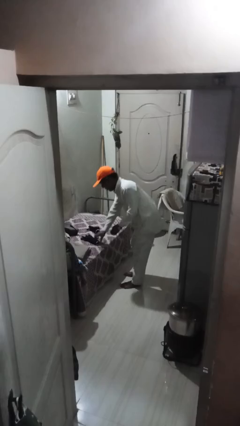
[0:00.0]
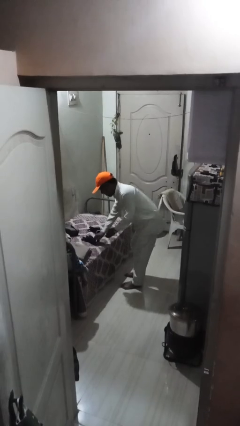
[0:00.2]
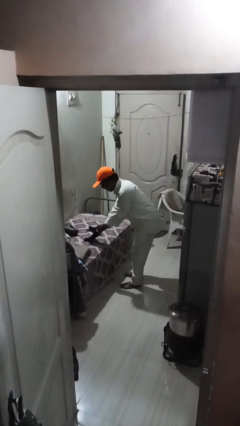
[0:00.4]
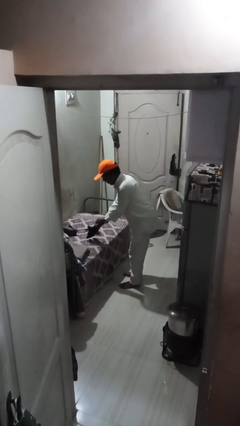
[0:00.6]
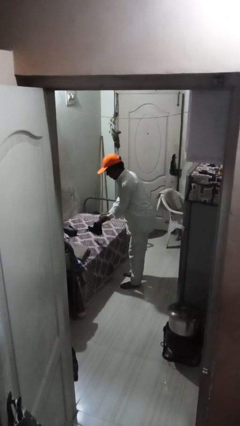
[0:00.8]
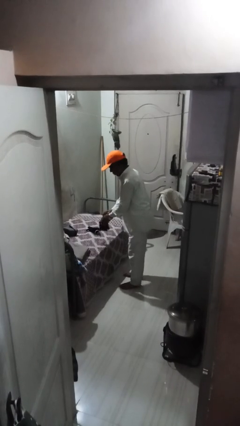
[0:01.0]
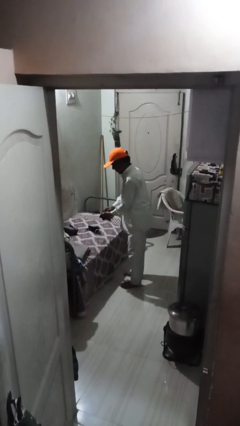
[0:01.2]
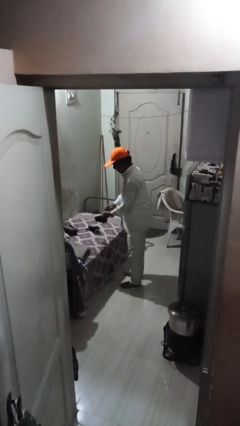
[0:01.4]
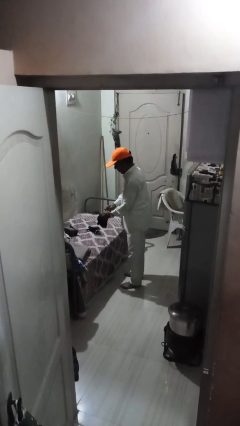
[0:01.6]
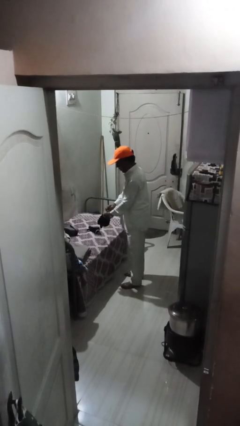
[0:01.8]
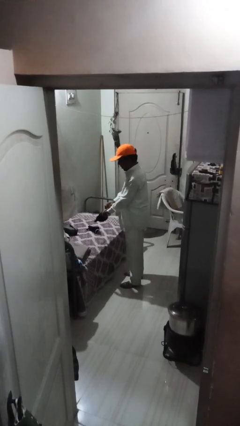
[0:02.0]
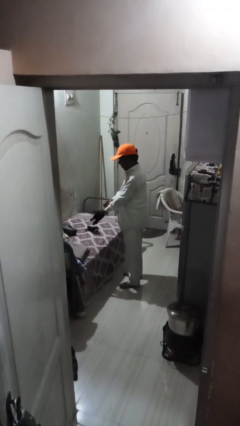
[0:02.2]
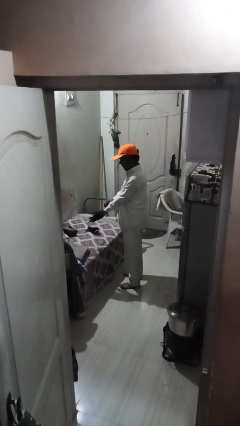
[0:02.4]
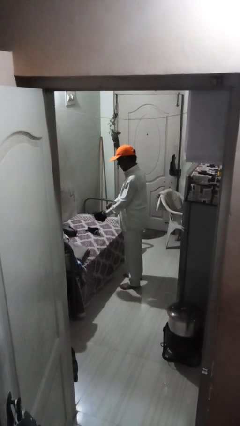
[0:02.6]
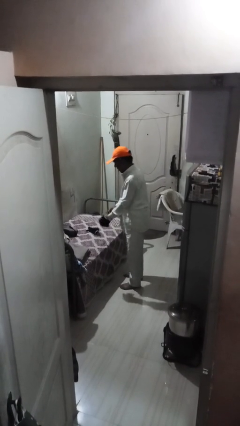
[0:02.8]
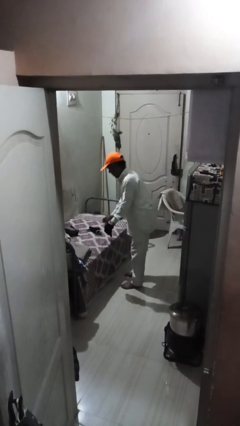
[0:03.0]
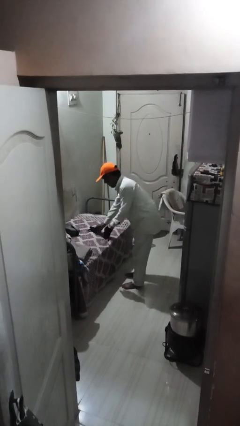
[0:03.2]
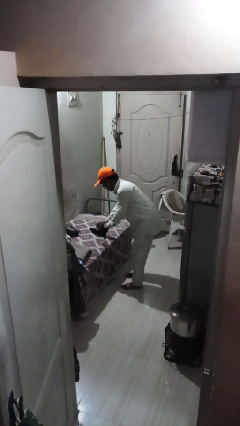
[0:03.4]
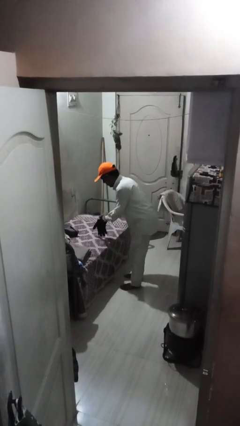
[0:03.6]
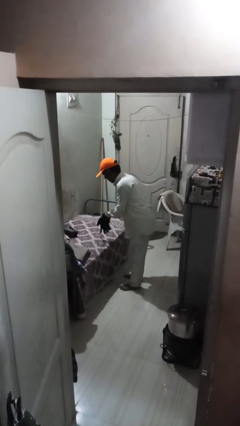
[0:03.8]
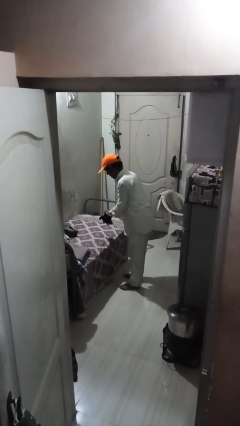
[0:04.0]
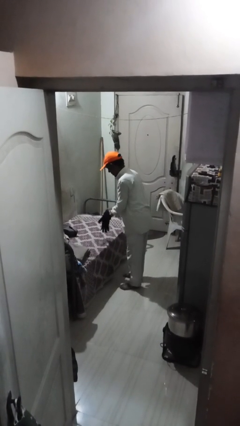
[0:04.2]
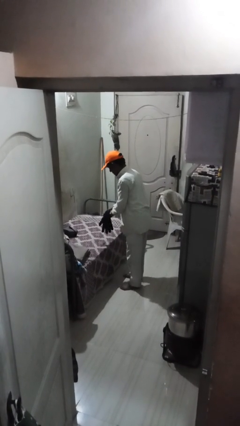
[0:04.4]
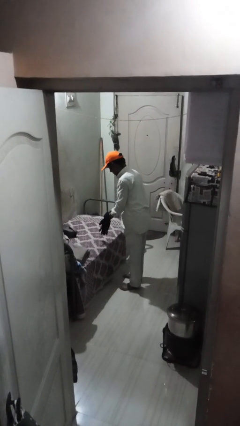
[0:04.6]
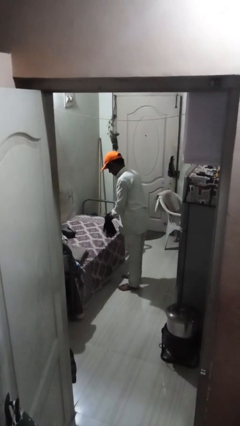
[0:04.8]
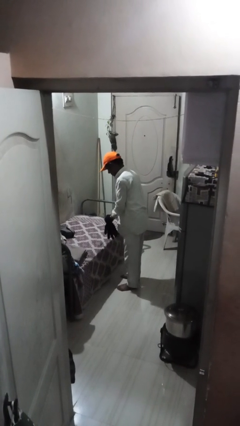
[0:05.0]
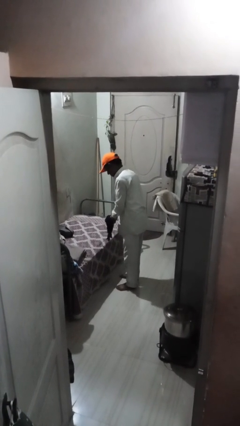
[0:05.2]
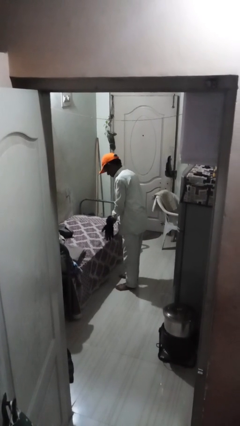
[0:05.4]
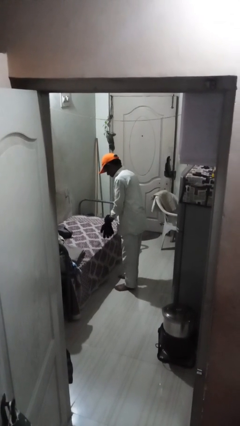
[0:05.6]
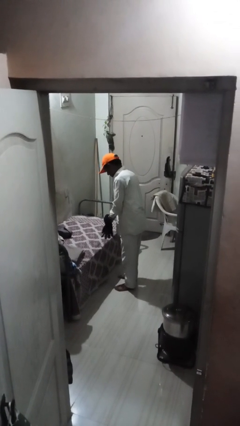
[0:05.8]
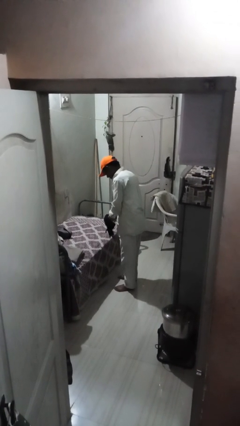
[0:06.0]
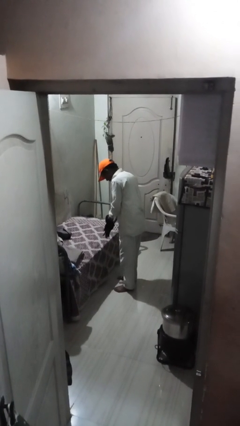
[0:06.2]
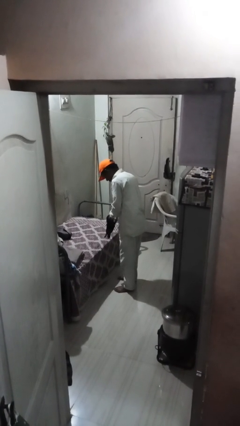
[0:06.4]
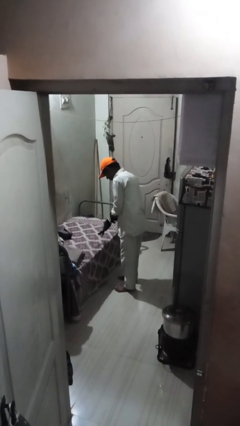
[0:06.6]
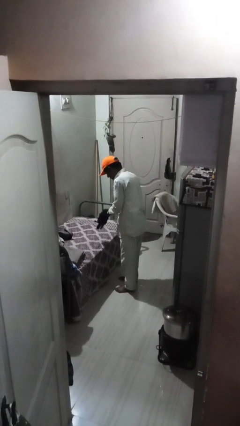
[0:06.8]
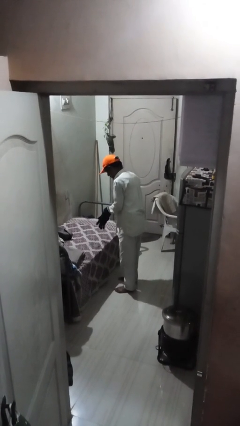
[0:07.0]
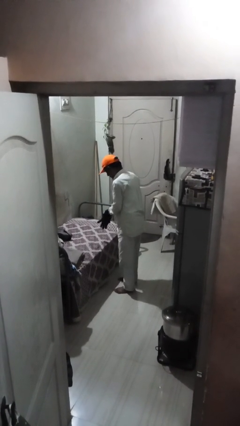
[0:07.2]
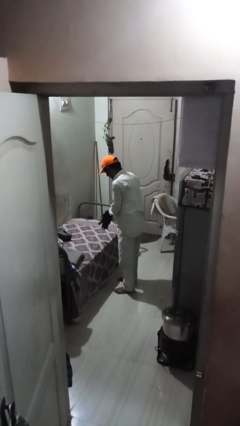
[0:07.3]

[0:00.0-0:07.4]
person puts on gloves

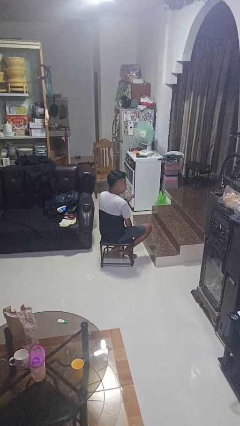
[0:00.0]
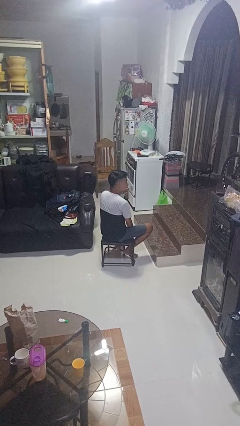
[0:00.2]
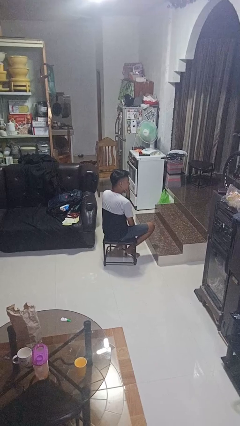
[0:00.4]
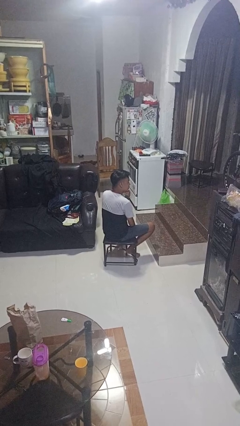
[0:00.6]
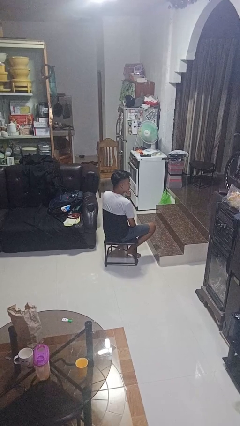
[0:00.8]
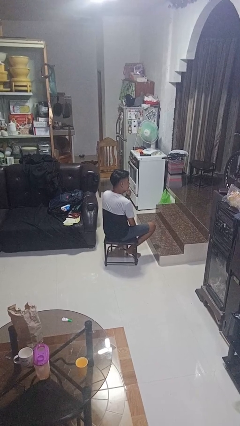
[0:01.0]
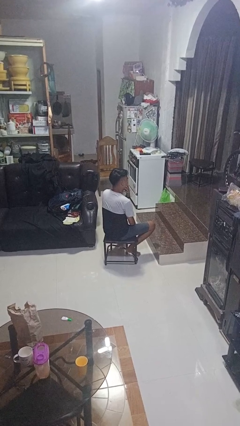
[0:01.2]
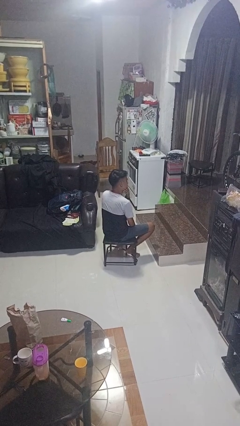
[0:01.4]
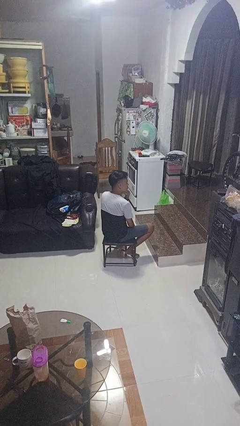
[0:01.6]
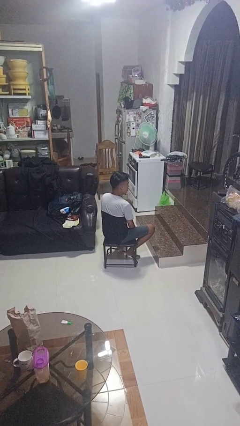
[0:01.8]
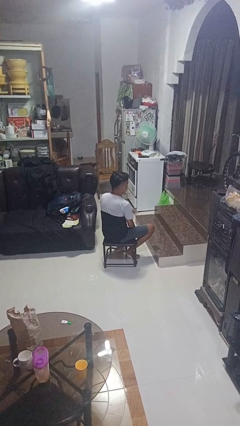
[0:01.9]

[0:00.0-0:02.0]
person strokes chin

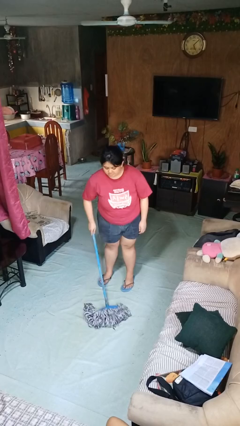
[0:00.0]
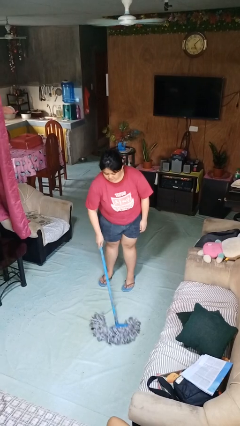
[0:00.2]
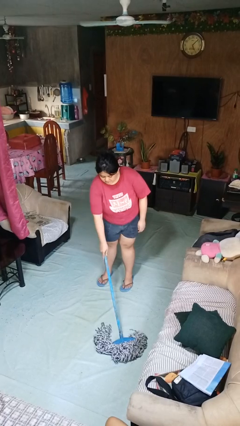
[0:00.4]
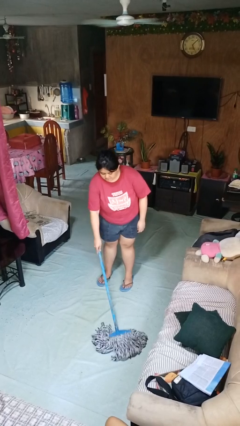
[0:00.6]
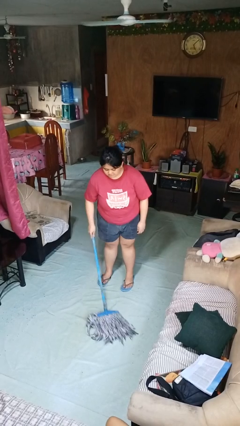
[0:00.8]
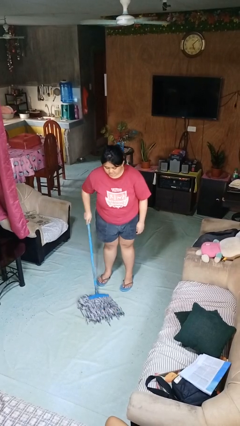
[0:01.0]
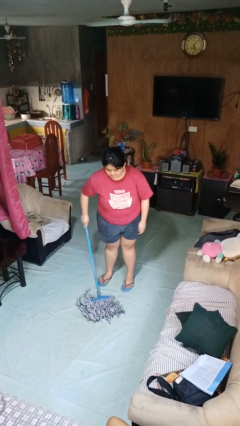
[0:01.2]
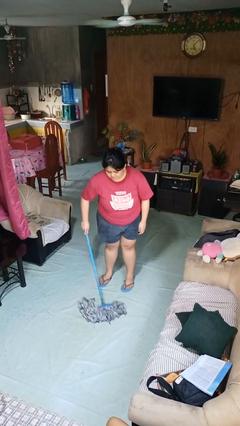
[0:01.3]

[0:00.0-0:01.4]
person mops

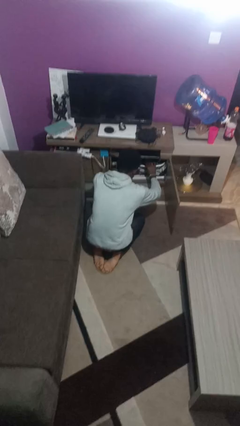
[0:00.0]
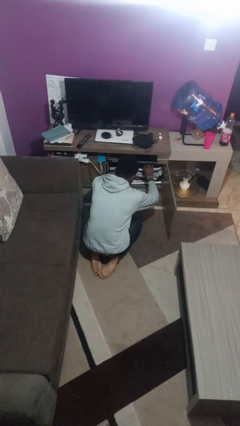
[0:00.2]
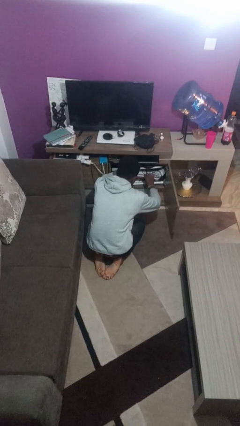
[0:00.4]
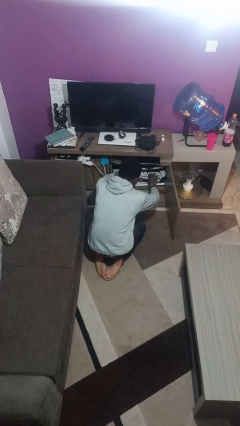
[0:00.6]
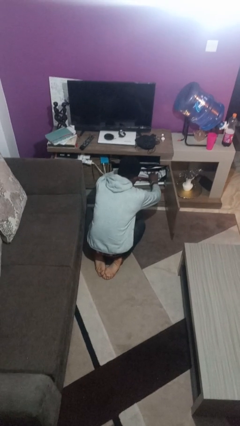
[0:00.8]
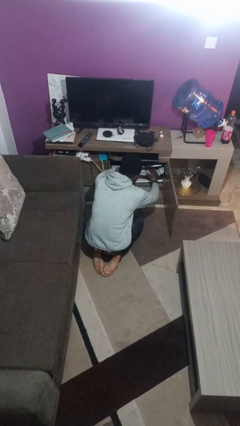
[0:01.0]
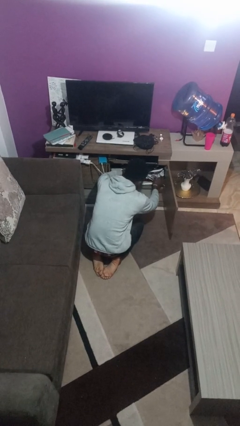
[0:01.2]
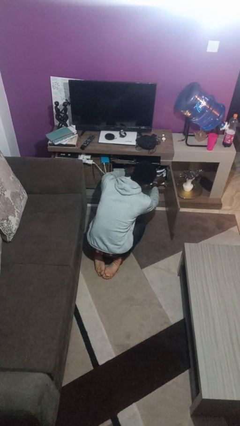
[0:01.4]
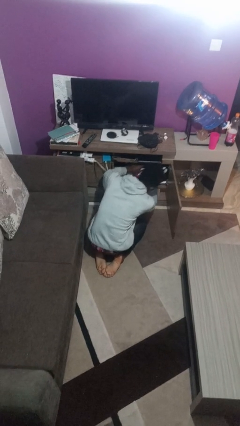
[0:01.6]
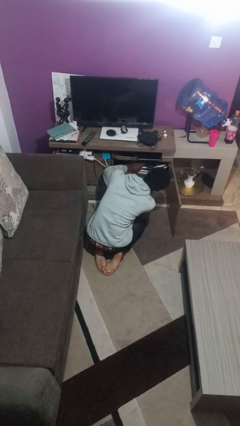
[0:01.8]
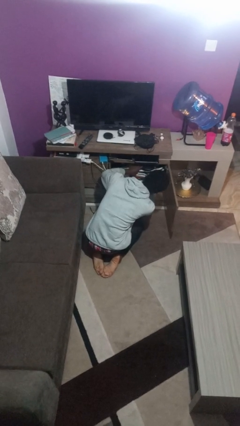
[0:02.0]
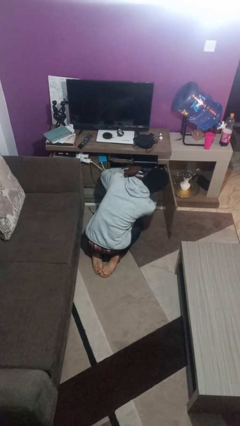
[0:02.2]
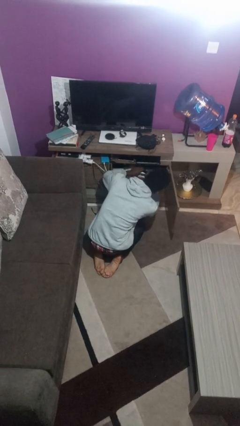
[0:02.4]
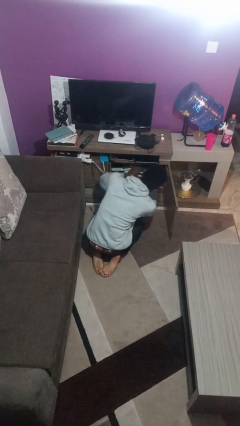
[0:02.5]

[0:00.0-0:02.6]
person searches in cabinet

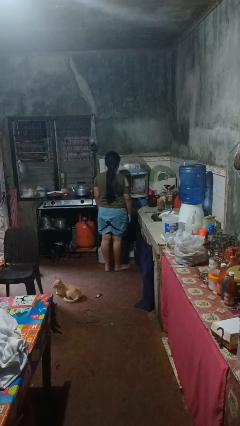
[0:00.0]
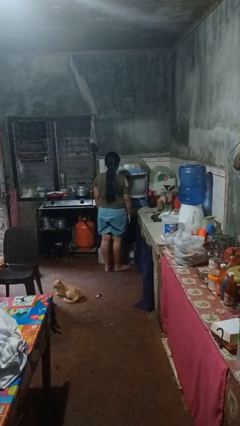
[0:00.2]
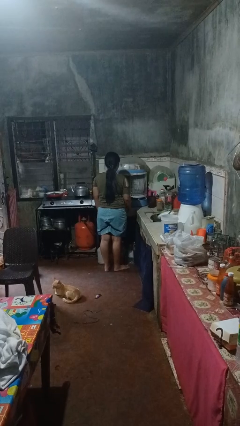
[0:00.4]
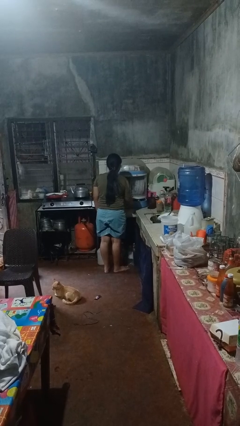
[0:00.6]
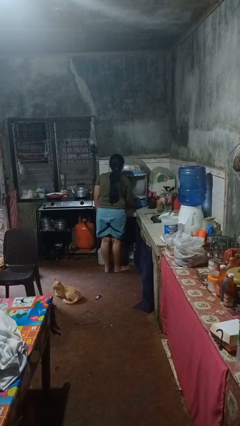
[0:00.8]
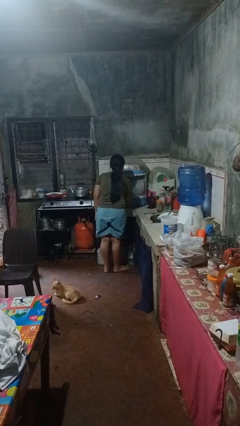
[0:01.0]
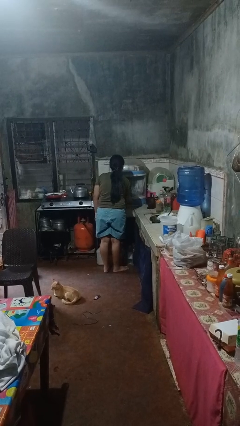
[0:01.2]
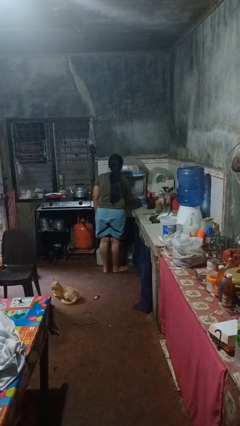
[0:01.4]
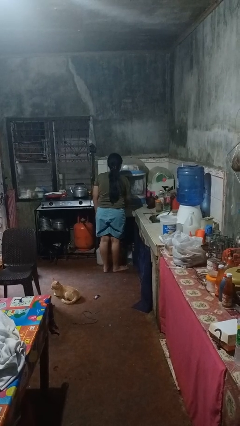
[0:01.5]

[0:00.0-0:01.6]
person closes kitchen drawer

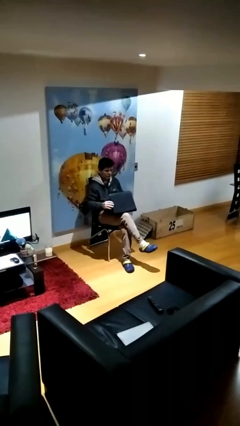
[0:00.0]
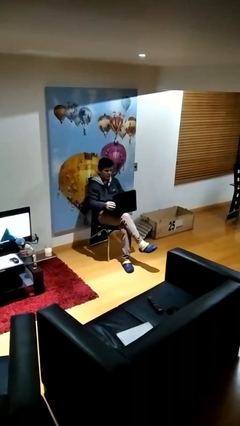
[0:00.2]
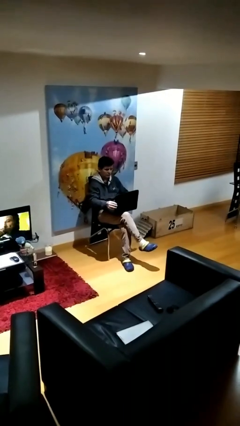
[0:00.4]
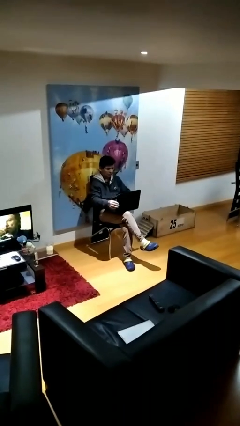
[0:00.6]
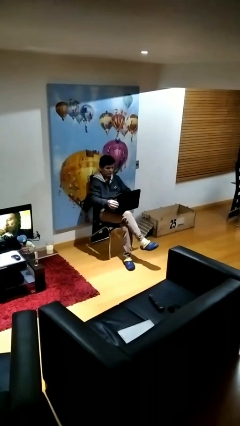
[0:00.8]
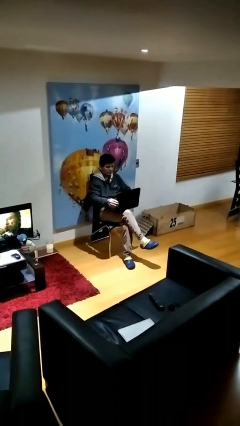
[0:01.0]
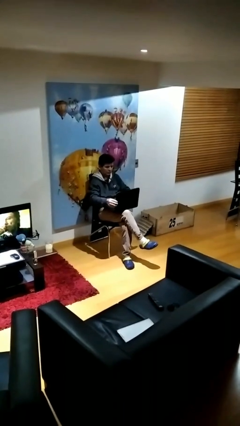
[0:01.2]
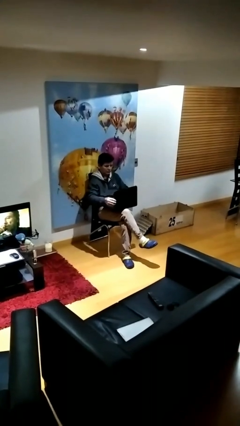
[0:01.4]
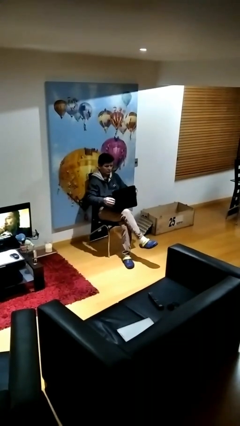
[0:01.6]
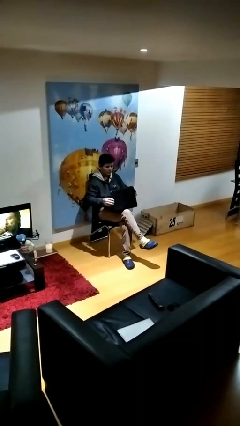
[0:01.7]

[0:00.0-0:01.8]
person interacts with laptop

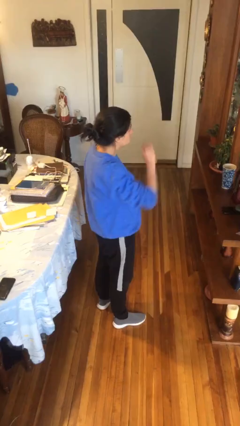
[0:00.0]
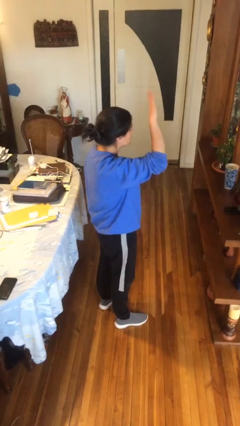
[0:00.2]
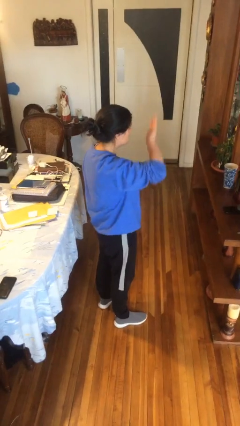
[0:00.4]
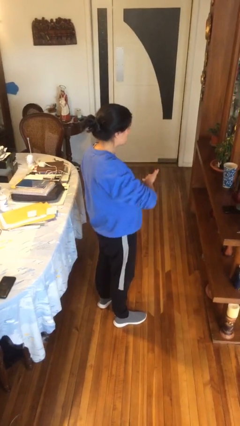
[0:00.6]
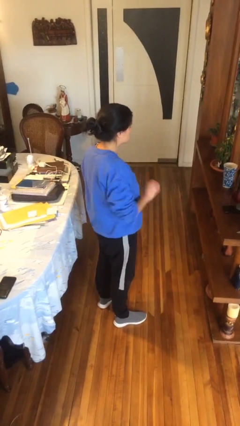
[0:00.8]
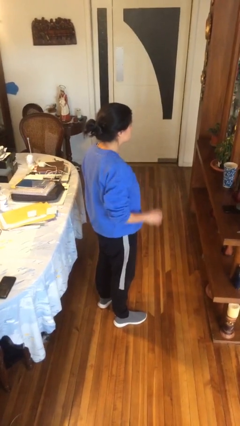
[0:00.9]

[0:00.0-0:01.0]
person gestures swipe down
